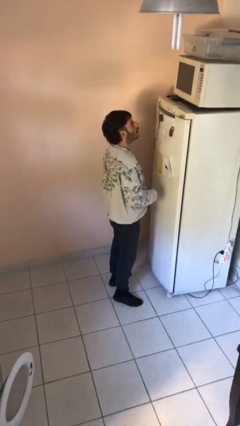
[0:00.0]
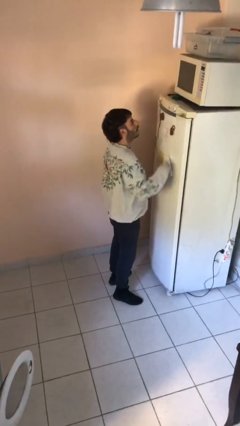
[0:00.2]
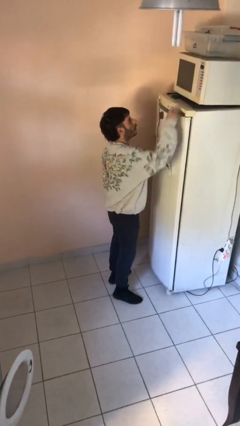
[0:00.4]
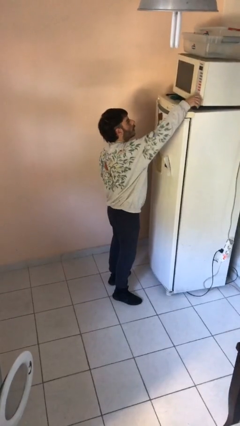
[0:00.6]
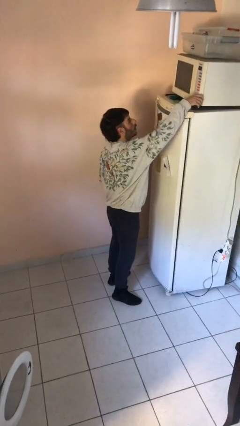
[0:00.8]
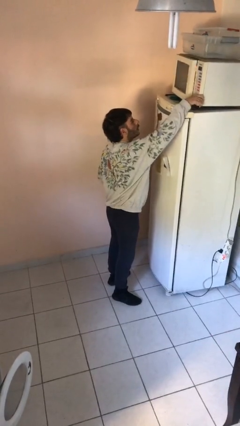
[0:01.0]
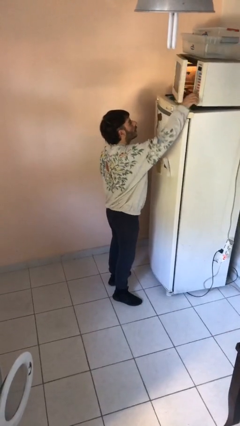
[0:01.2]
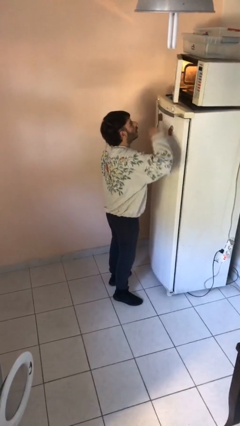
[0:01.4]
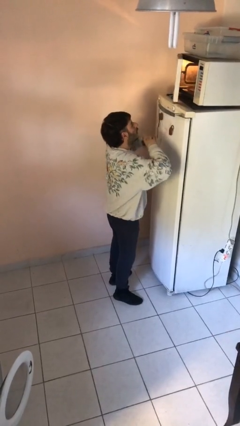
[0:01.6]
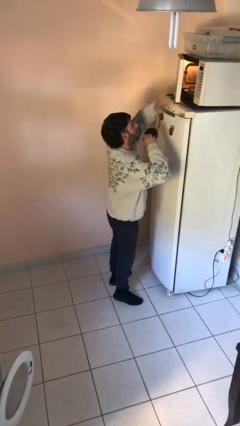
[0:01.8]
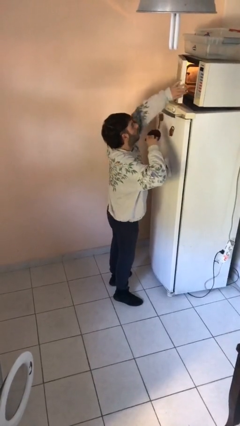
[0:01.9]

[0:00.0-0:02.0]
person opens microwave

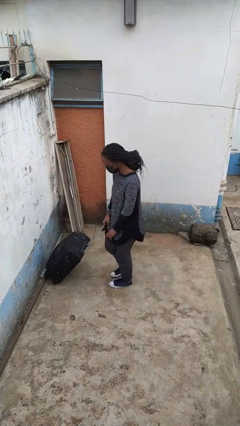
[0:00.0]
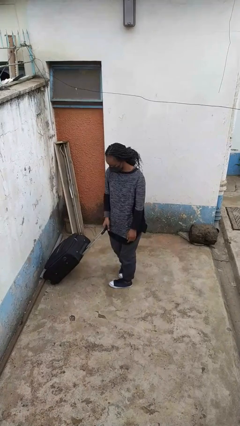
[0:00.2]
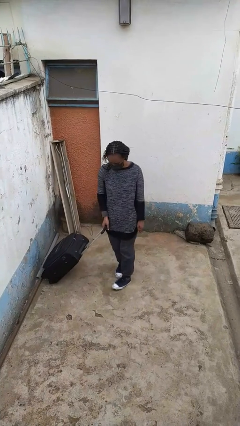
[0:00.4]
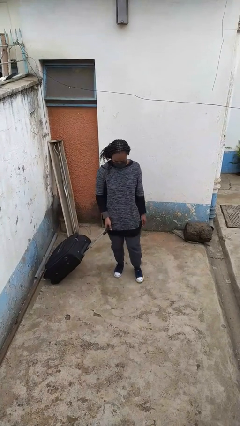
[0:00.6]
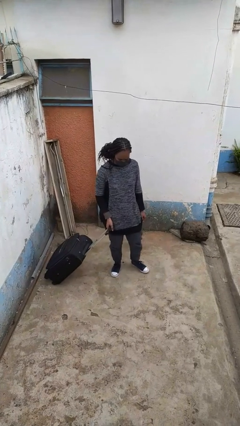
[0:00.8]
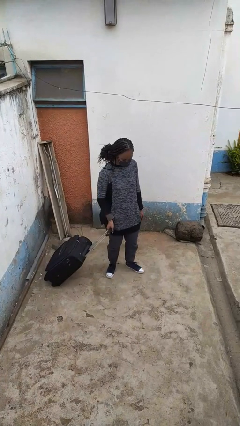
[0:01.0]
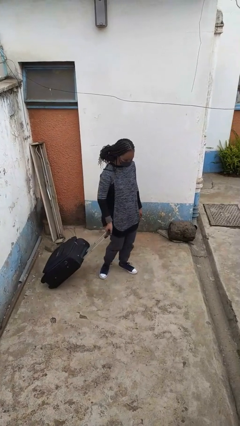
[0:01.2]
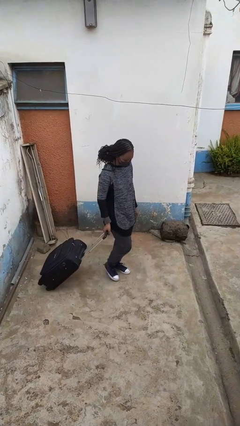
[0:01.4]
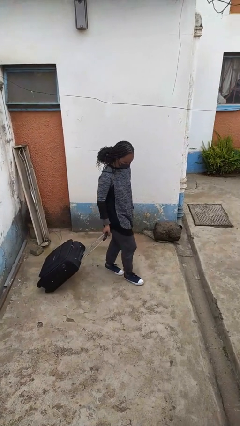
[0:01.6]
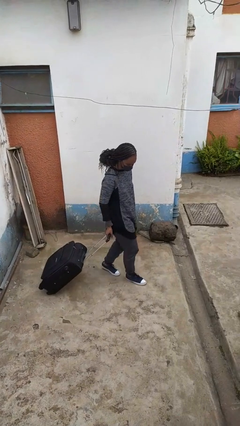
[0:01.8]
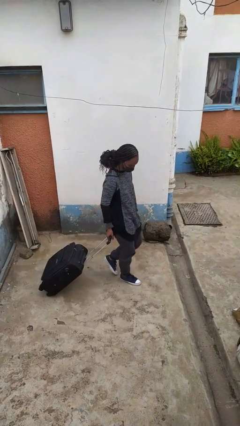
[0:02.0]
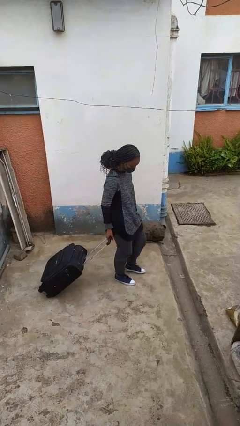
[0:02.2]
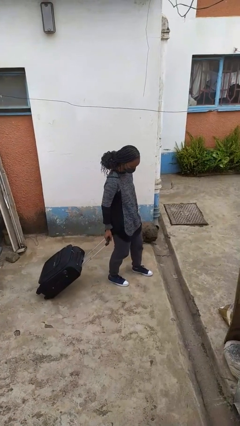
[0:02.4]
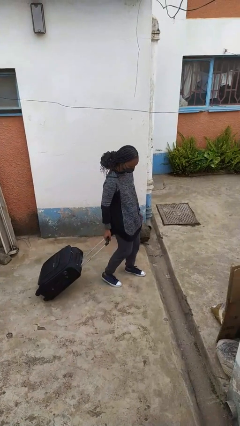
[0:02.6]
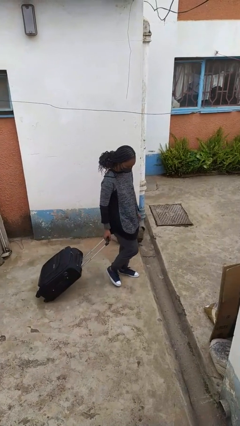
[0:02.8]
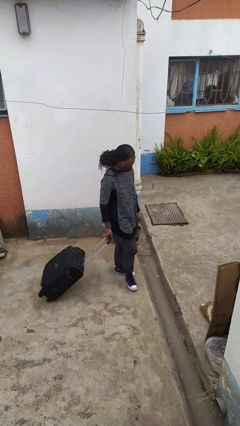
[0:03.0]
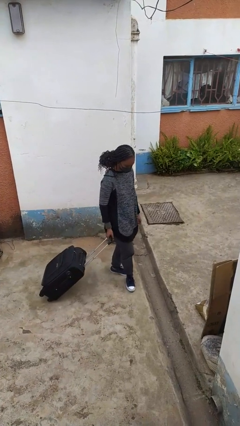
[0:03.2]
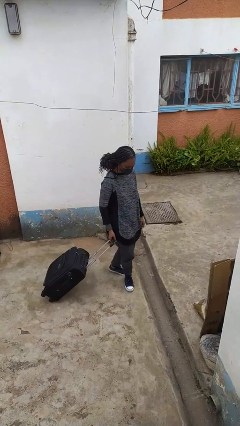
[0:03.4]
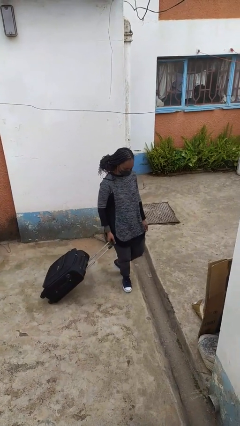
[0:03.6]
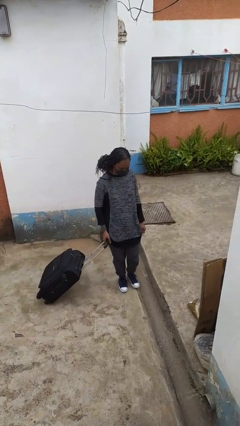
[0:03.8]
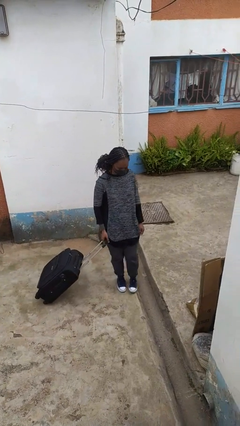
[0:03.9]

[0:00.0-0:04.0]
person pulls wheeled cart

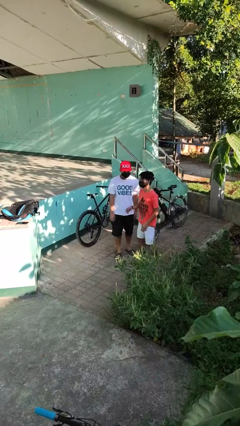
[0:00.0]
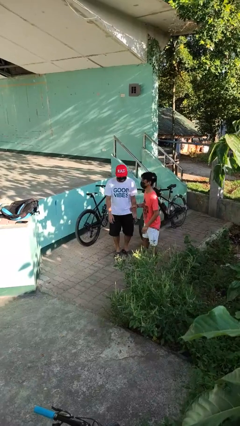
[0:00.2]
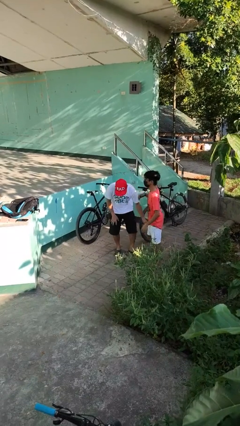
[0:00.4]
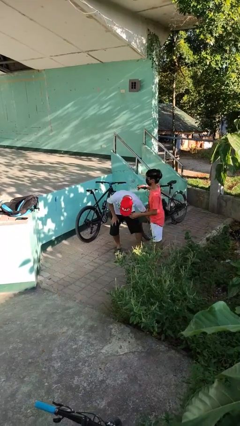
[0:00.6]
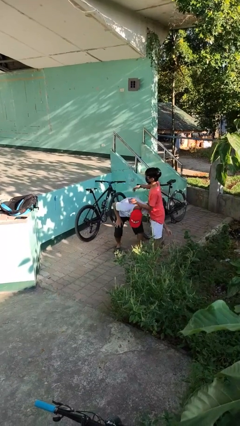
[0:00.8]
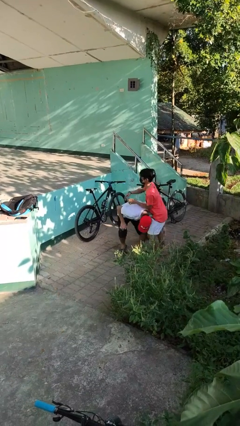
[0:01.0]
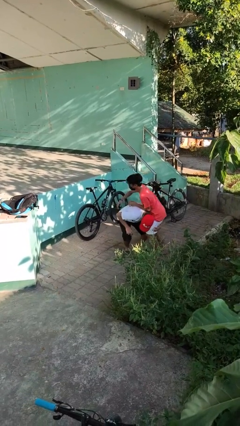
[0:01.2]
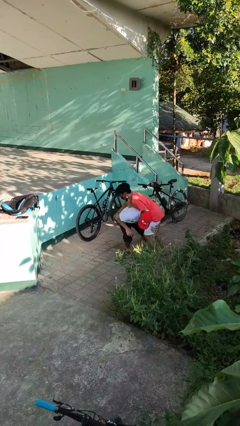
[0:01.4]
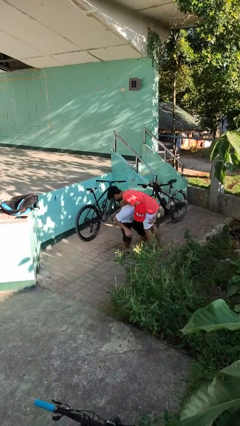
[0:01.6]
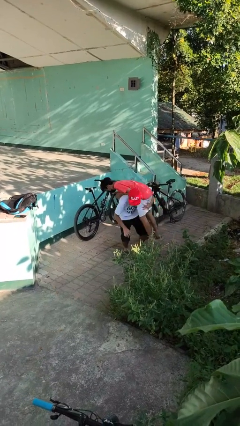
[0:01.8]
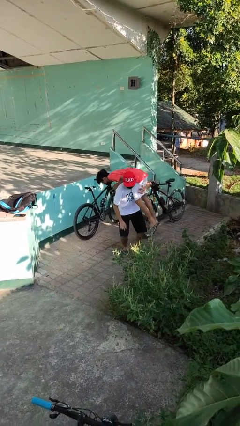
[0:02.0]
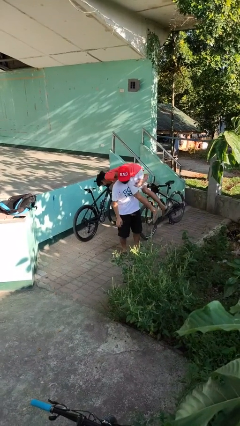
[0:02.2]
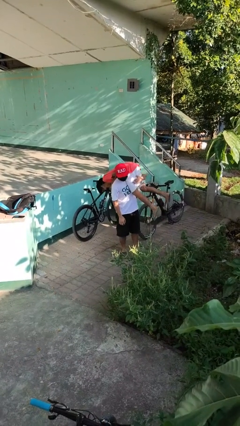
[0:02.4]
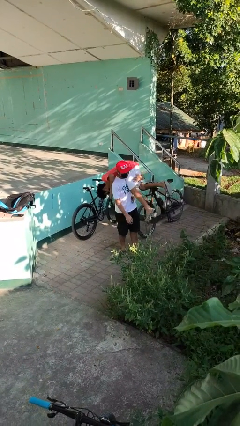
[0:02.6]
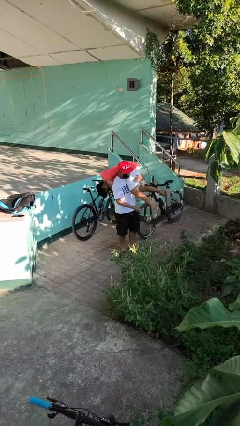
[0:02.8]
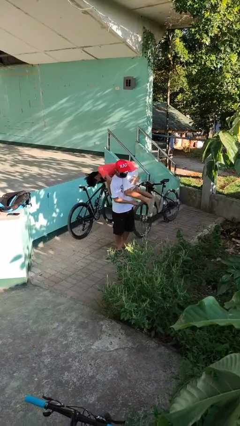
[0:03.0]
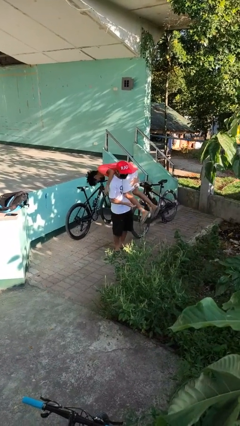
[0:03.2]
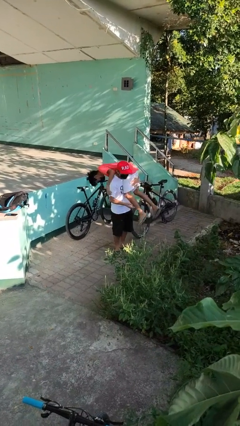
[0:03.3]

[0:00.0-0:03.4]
person carries person over shoulder

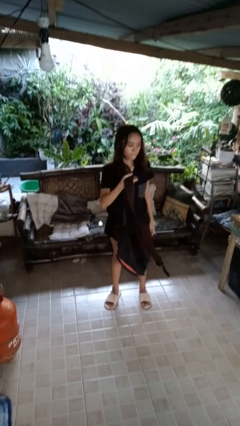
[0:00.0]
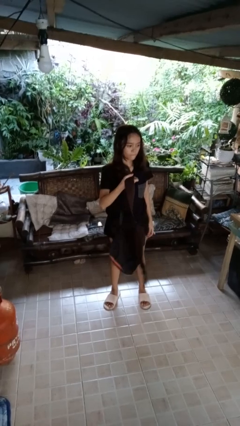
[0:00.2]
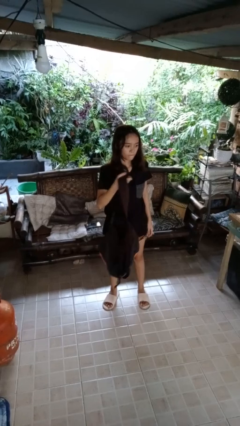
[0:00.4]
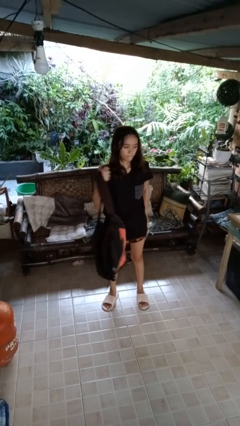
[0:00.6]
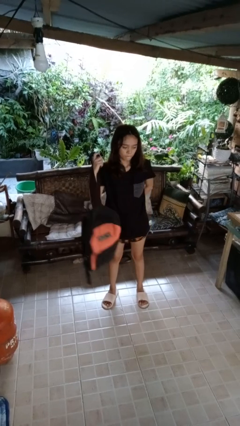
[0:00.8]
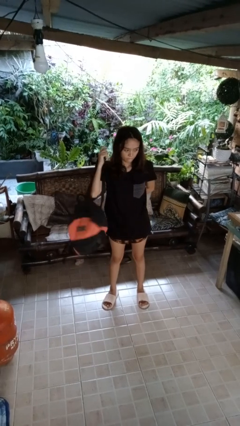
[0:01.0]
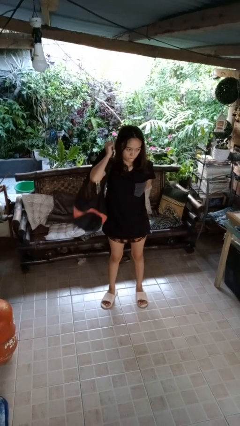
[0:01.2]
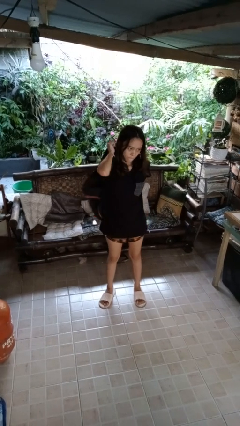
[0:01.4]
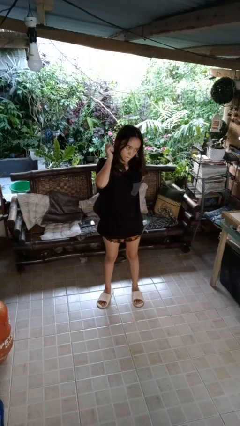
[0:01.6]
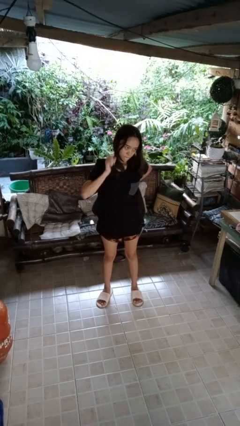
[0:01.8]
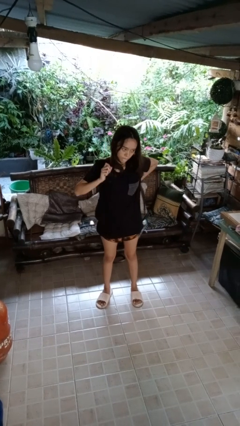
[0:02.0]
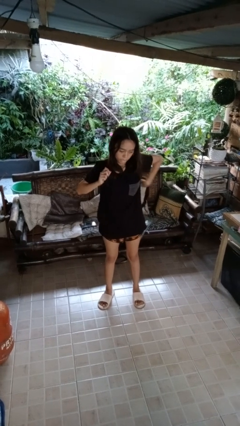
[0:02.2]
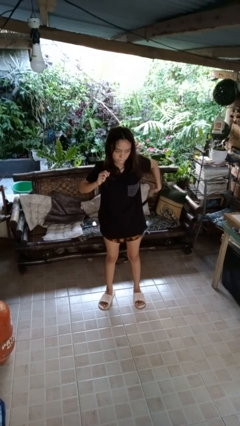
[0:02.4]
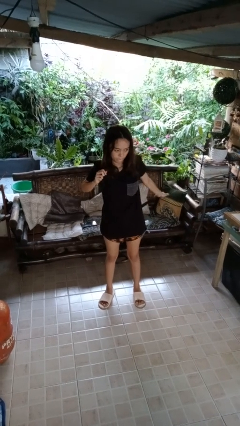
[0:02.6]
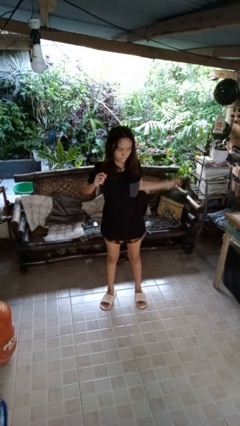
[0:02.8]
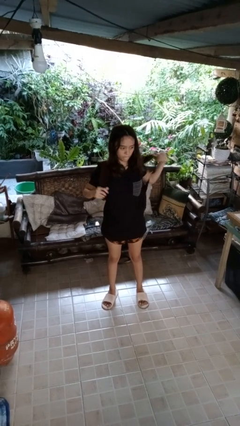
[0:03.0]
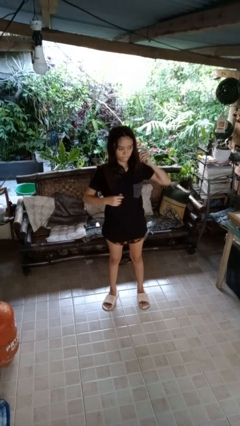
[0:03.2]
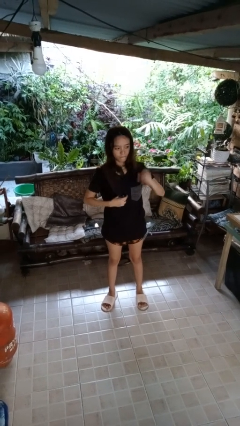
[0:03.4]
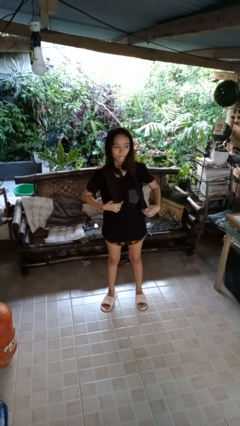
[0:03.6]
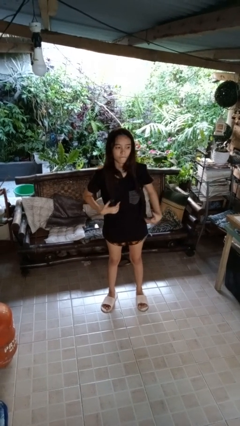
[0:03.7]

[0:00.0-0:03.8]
person puts on backpack

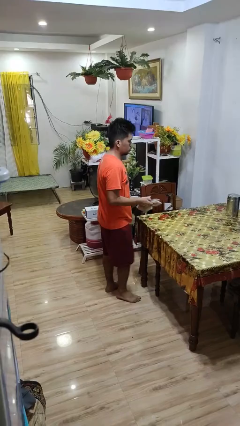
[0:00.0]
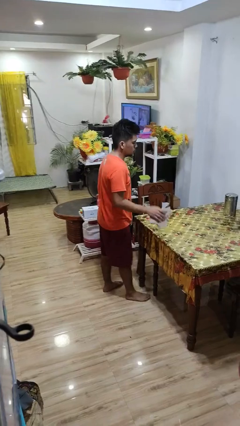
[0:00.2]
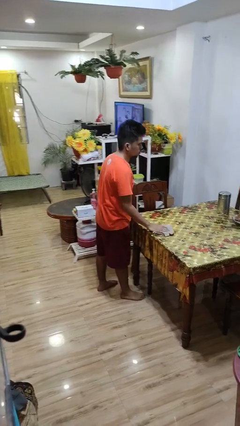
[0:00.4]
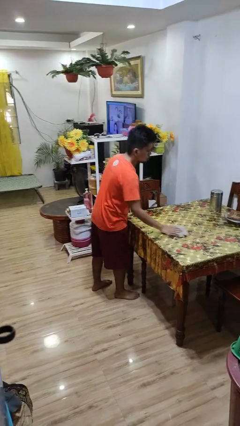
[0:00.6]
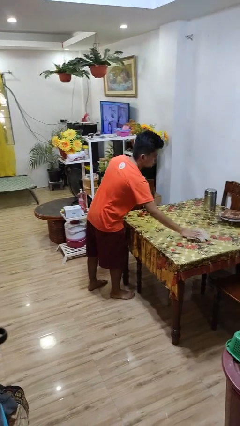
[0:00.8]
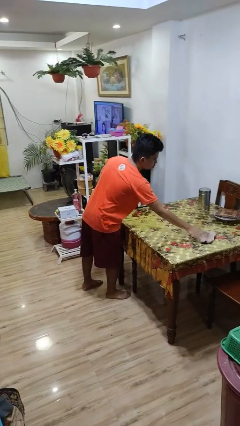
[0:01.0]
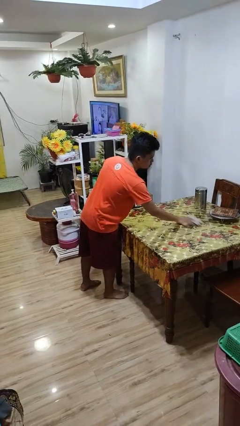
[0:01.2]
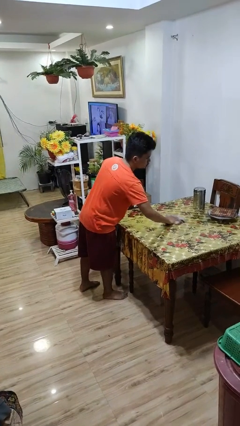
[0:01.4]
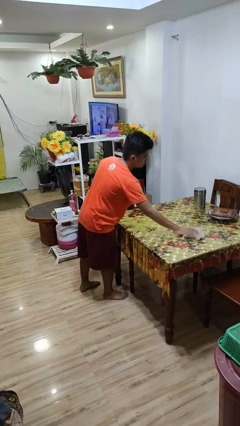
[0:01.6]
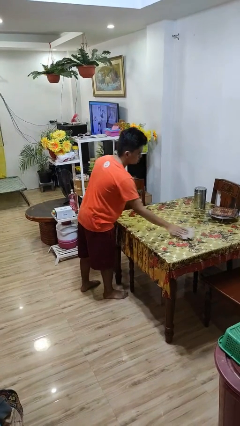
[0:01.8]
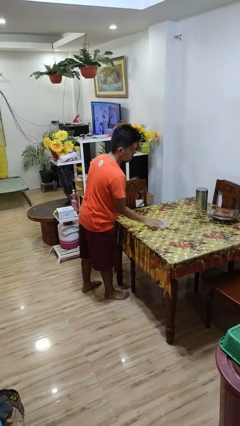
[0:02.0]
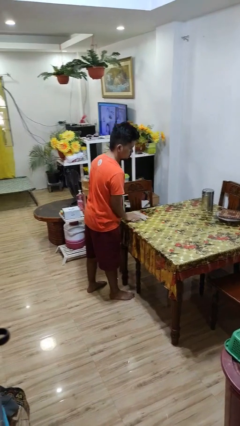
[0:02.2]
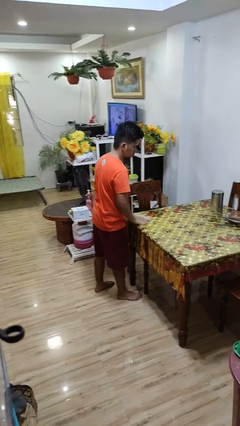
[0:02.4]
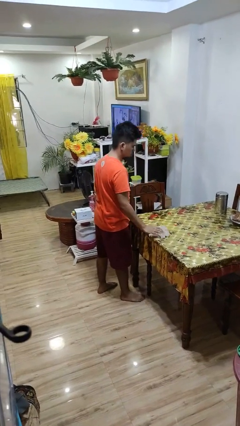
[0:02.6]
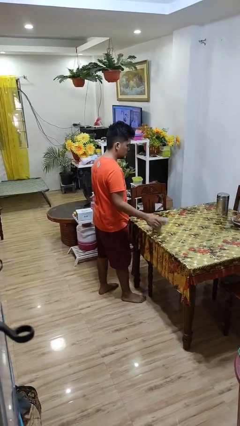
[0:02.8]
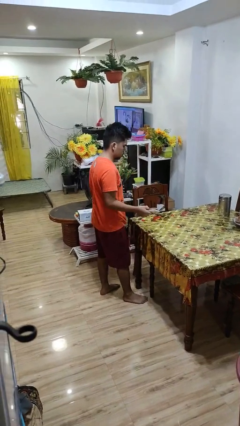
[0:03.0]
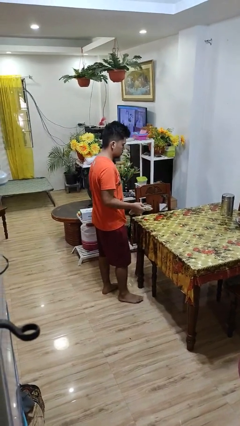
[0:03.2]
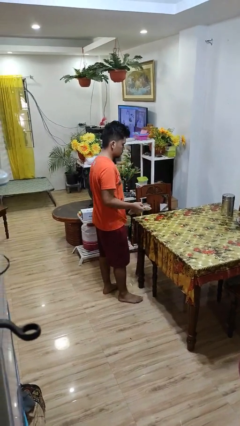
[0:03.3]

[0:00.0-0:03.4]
person cleans table with rag

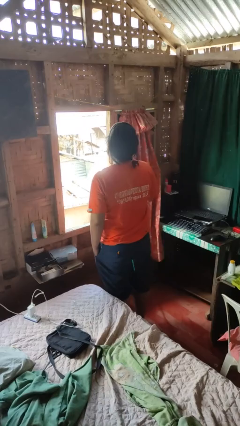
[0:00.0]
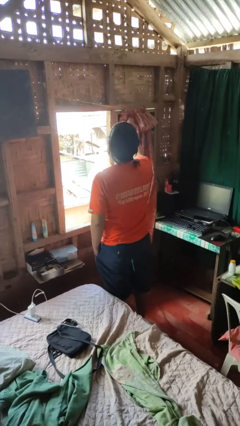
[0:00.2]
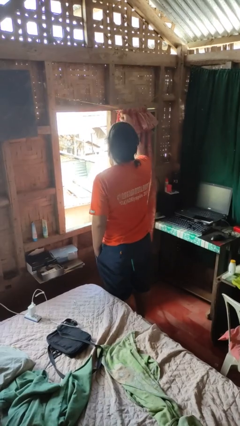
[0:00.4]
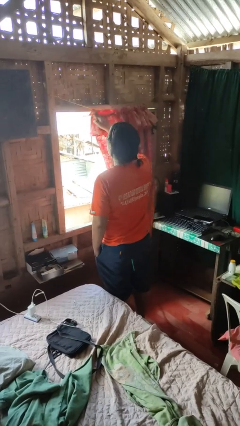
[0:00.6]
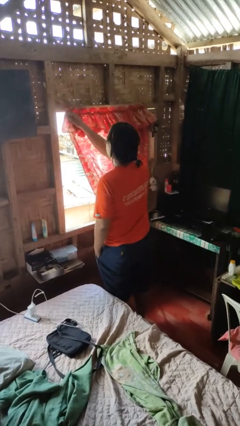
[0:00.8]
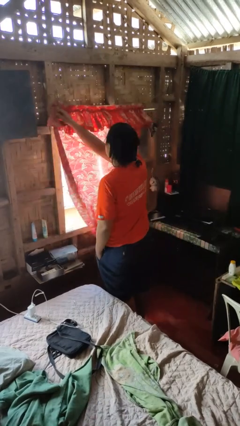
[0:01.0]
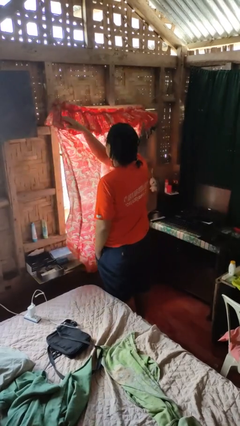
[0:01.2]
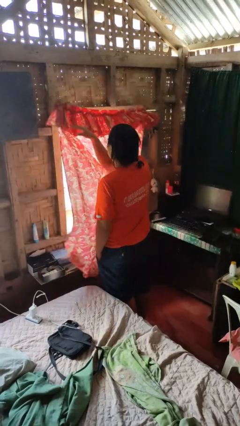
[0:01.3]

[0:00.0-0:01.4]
person closes curtains
